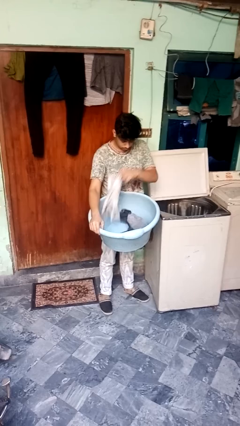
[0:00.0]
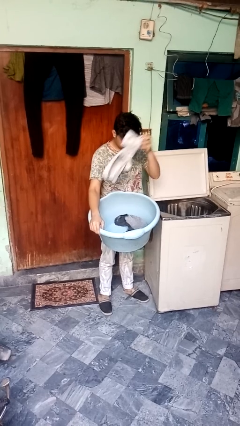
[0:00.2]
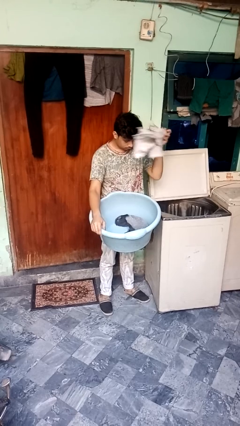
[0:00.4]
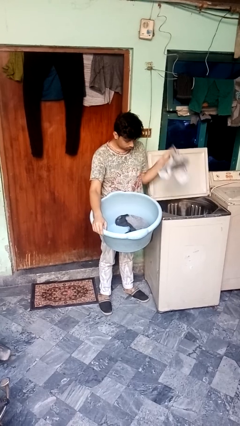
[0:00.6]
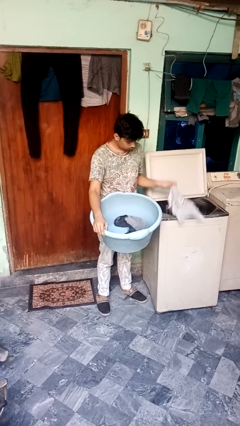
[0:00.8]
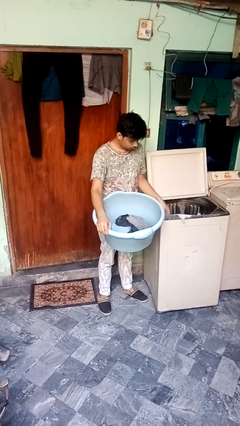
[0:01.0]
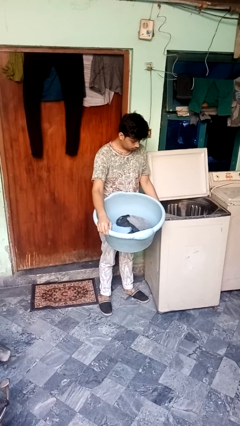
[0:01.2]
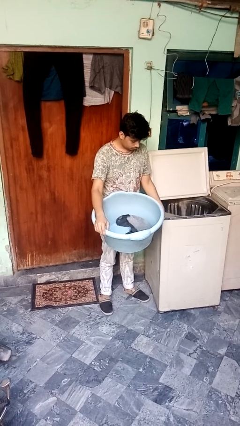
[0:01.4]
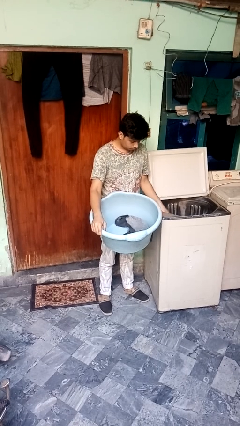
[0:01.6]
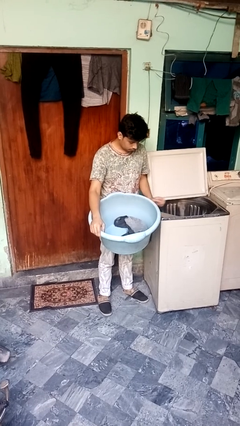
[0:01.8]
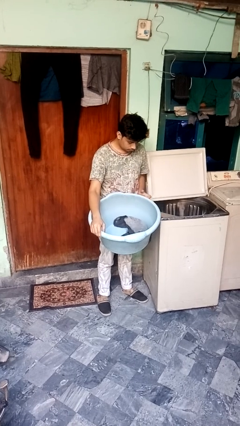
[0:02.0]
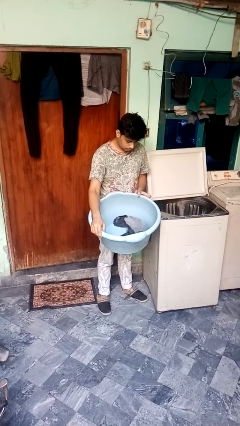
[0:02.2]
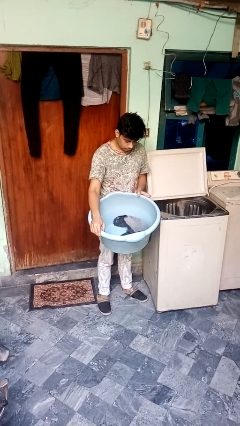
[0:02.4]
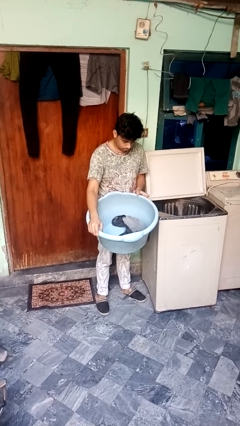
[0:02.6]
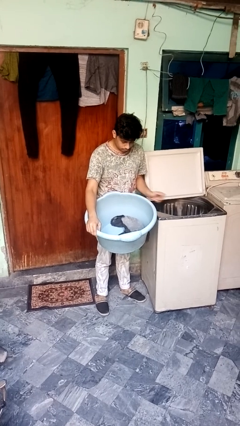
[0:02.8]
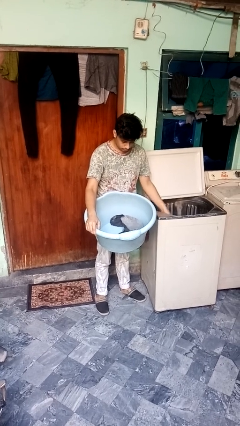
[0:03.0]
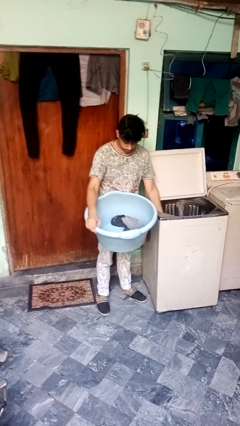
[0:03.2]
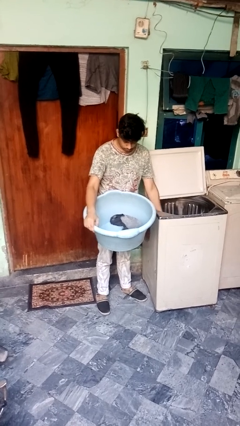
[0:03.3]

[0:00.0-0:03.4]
person unloads clotheswasher

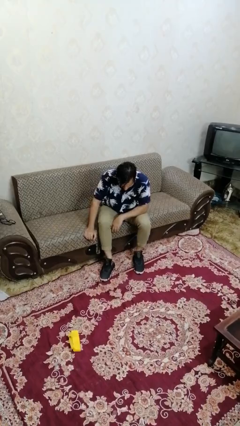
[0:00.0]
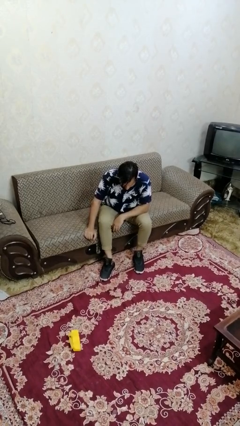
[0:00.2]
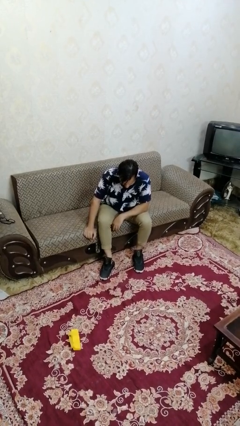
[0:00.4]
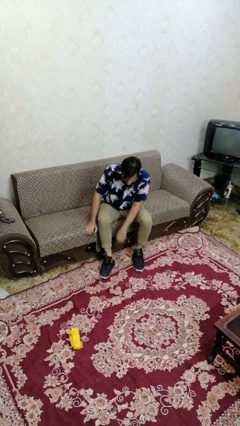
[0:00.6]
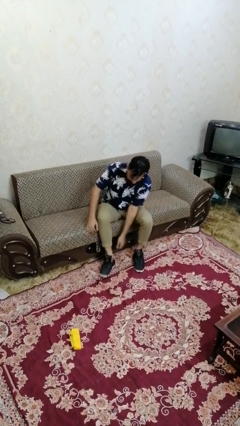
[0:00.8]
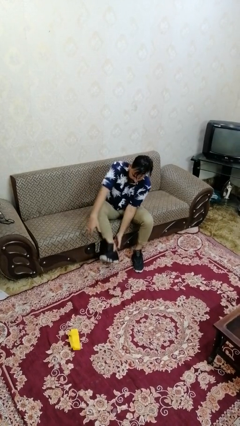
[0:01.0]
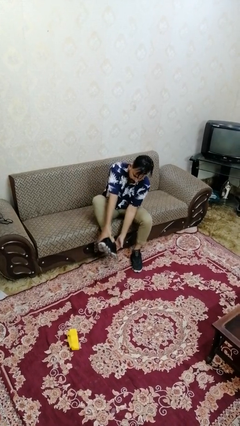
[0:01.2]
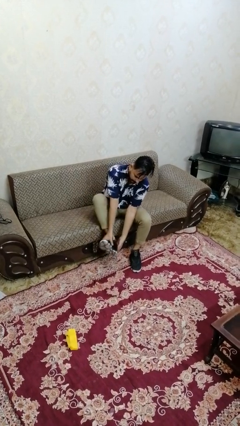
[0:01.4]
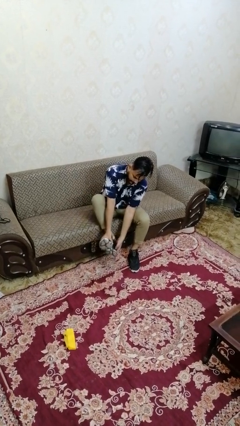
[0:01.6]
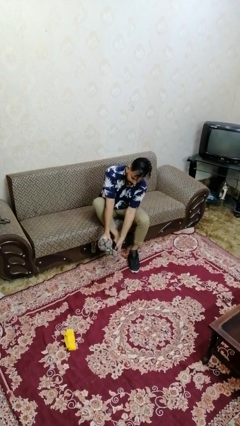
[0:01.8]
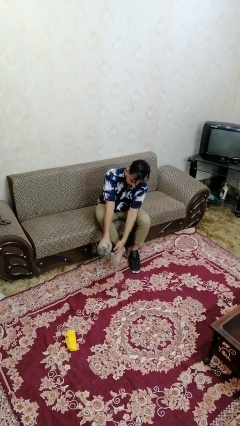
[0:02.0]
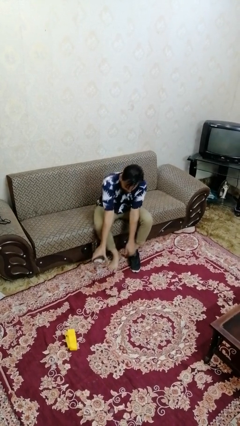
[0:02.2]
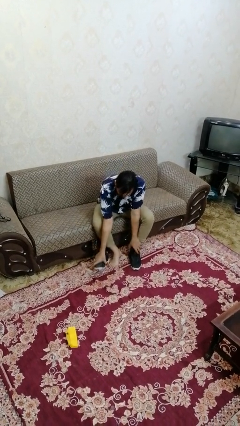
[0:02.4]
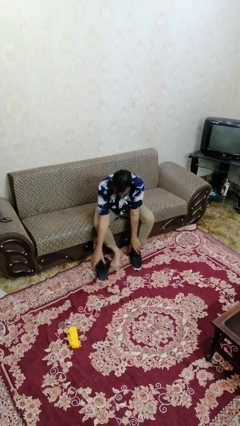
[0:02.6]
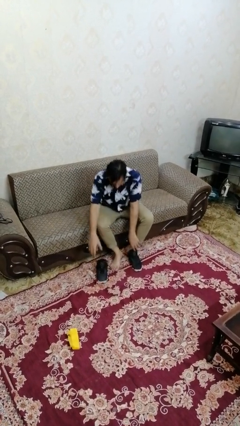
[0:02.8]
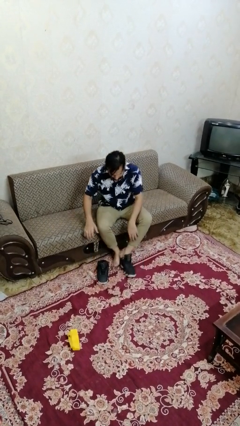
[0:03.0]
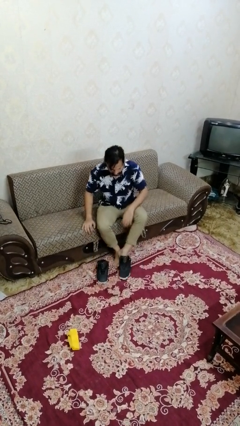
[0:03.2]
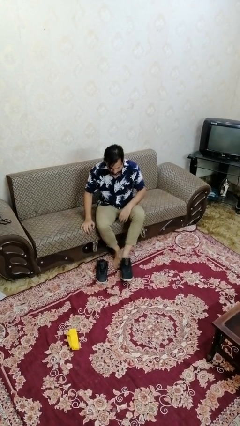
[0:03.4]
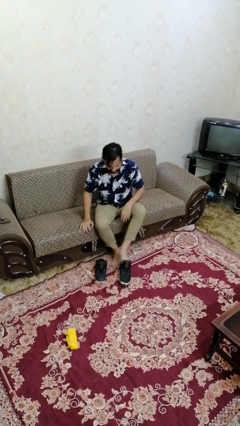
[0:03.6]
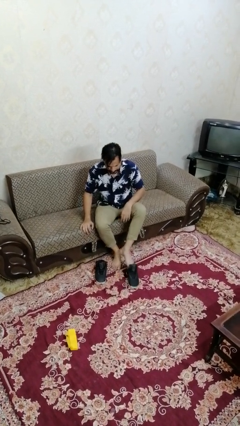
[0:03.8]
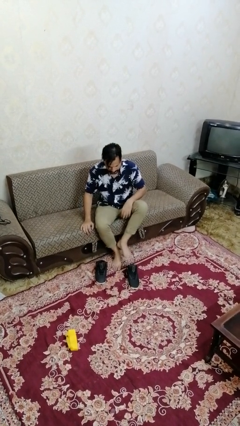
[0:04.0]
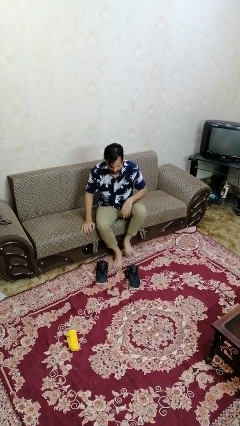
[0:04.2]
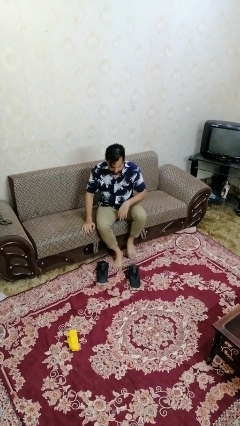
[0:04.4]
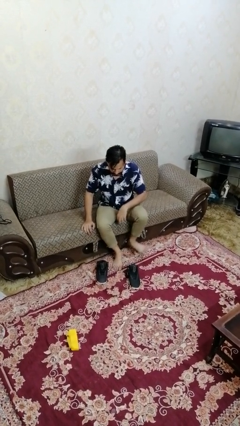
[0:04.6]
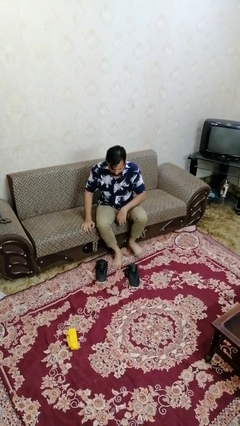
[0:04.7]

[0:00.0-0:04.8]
person takes off shoes

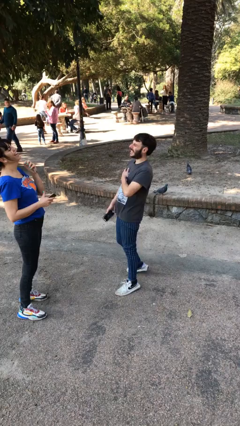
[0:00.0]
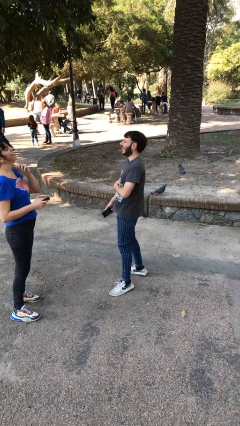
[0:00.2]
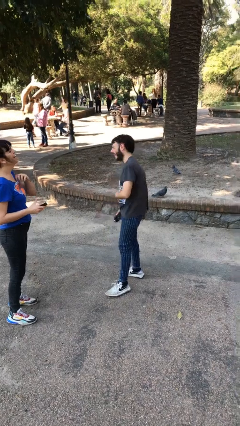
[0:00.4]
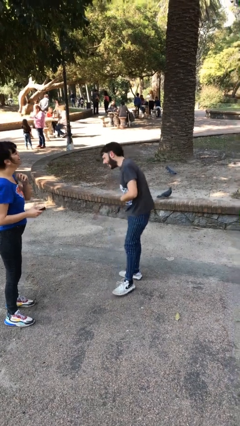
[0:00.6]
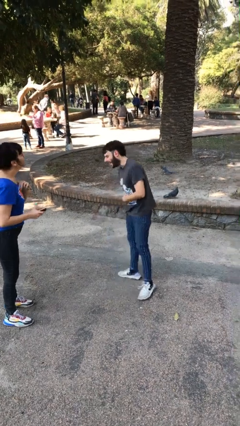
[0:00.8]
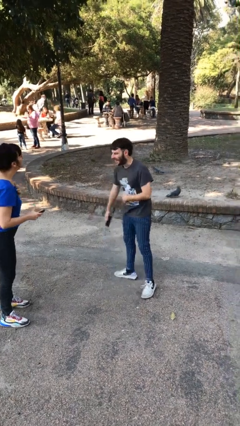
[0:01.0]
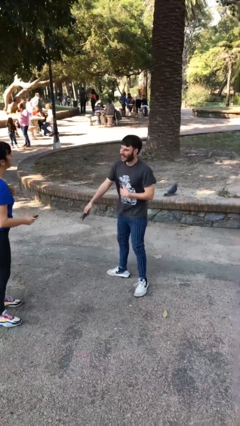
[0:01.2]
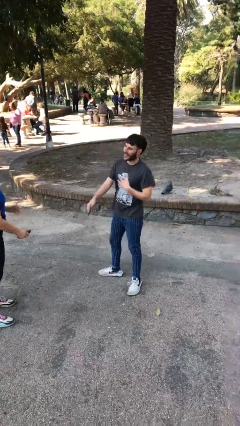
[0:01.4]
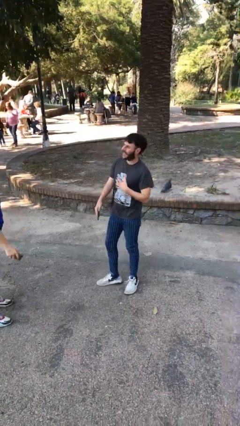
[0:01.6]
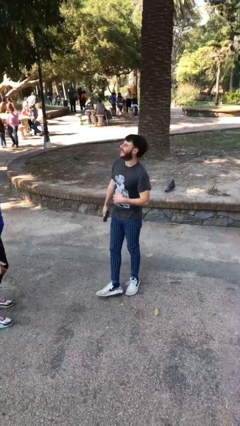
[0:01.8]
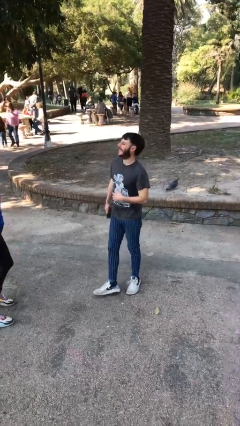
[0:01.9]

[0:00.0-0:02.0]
person laughs with person

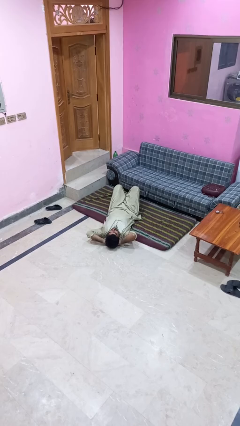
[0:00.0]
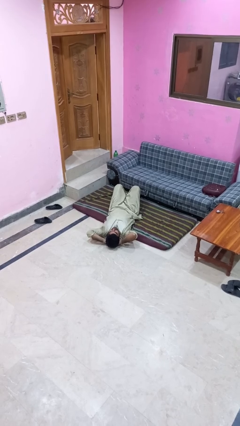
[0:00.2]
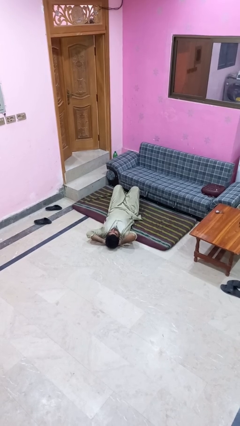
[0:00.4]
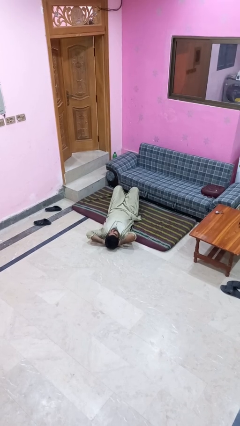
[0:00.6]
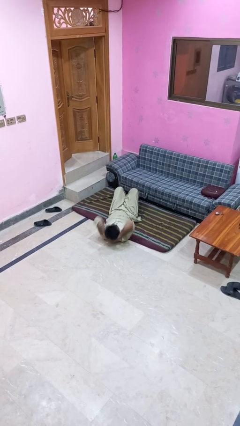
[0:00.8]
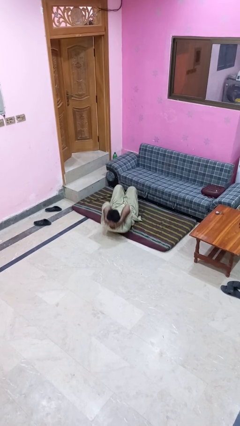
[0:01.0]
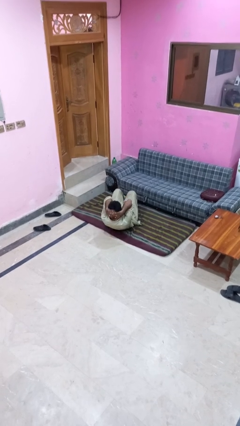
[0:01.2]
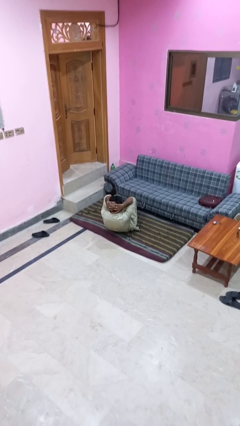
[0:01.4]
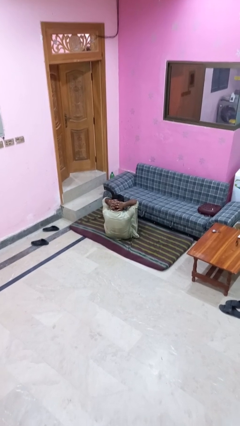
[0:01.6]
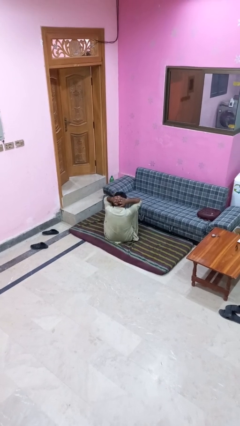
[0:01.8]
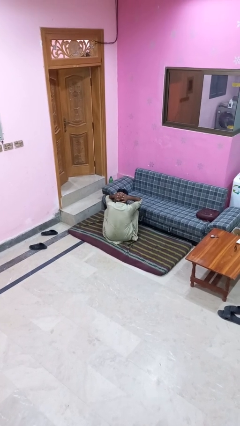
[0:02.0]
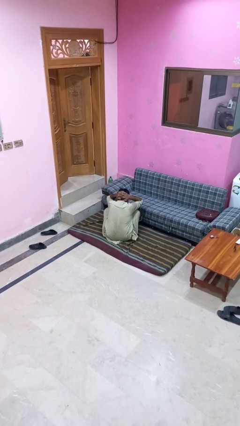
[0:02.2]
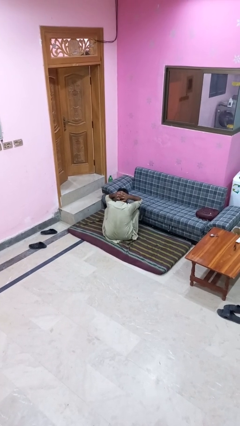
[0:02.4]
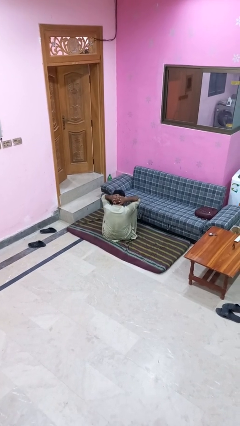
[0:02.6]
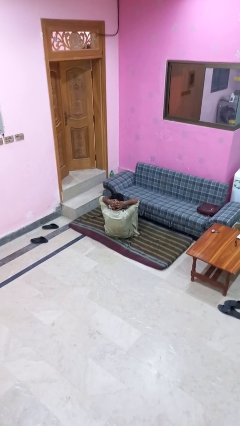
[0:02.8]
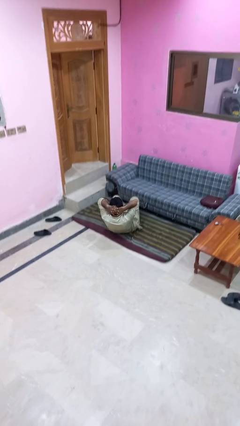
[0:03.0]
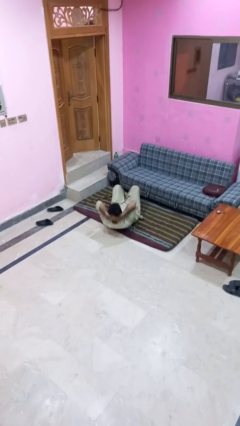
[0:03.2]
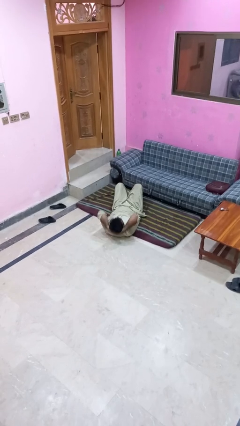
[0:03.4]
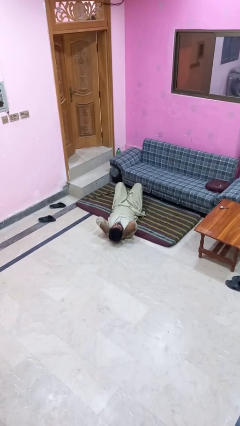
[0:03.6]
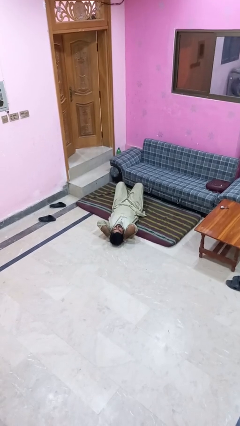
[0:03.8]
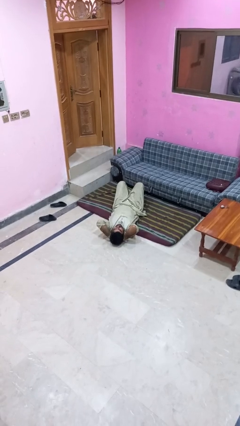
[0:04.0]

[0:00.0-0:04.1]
person exercises with situp

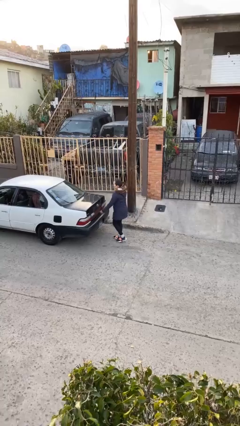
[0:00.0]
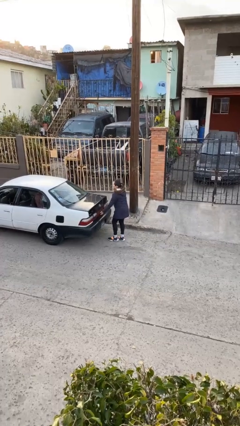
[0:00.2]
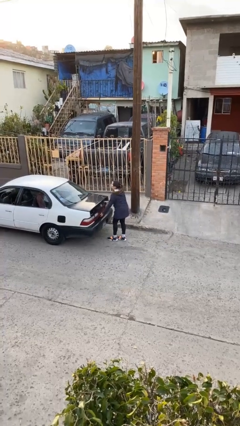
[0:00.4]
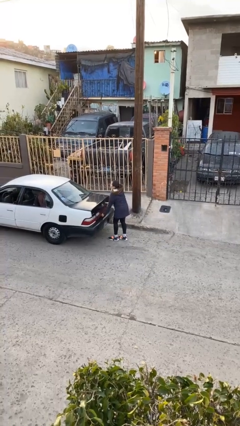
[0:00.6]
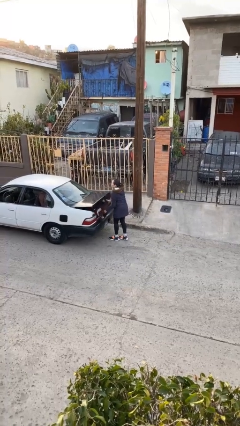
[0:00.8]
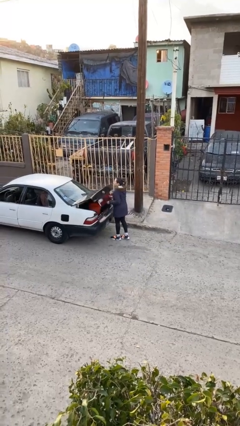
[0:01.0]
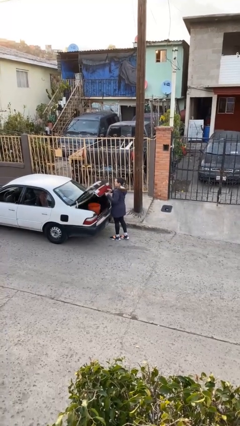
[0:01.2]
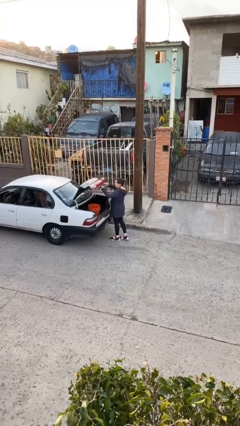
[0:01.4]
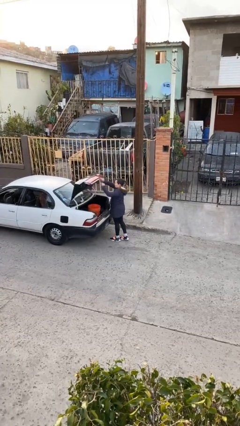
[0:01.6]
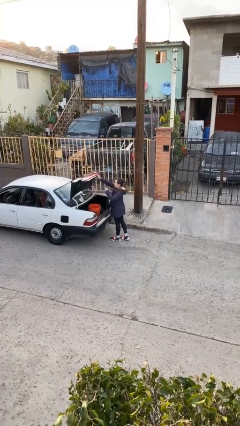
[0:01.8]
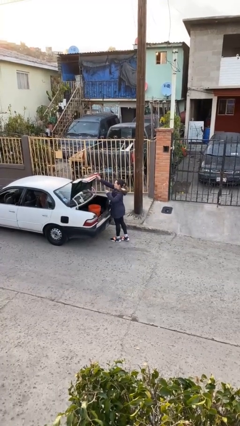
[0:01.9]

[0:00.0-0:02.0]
person opens car trunk

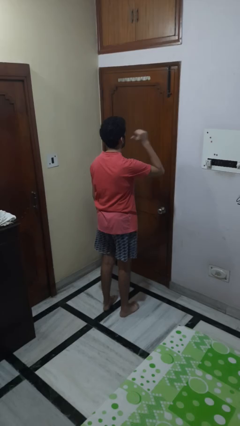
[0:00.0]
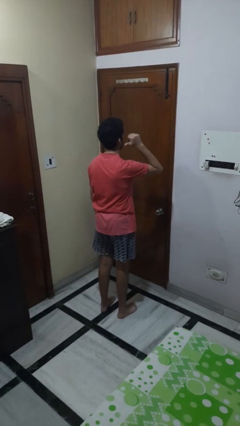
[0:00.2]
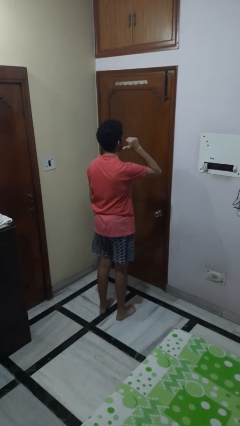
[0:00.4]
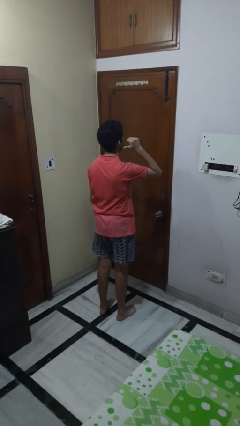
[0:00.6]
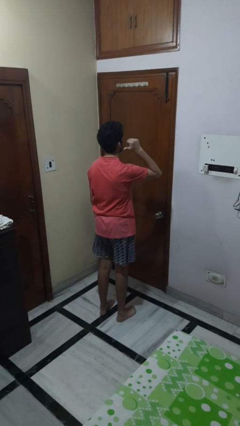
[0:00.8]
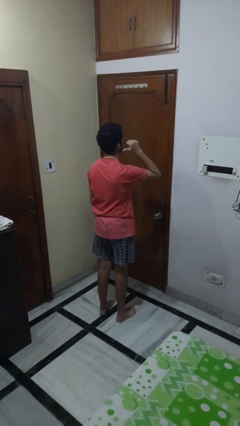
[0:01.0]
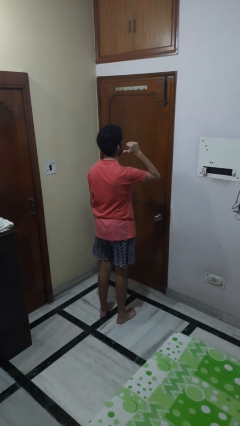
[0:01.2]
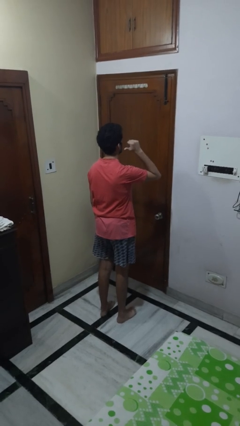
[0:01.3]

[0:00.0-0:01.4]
person gestures behind me

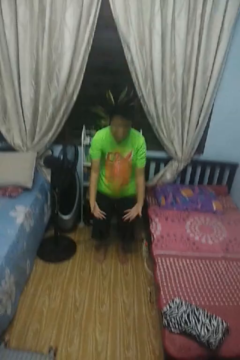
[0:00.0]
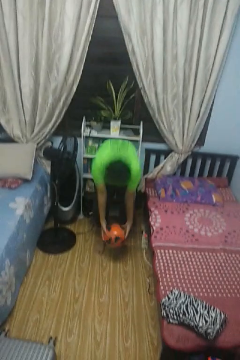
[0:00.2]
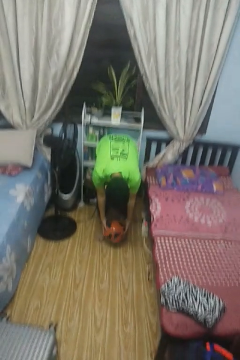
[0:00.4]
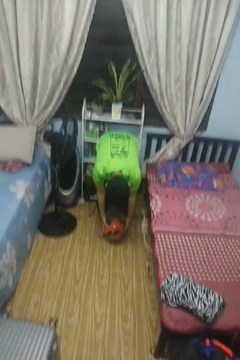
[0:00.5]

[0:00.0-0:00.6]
person catches dropped object
